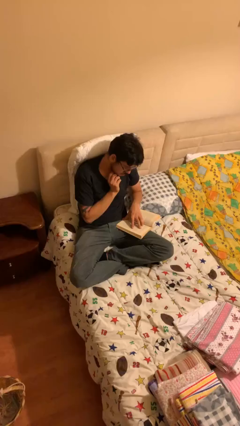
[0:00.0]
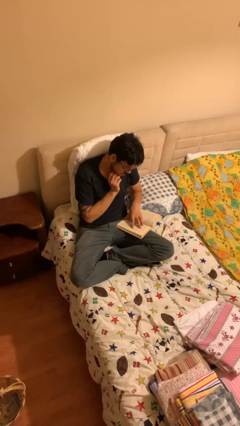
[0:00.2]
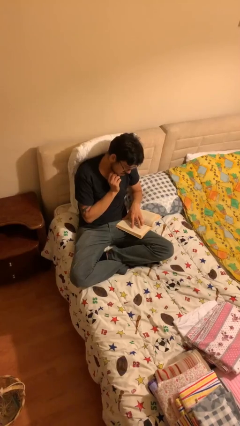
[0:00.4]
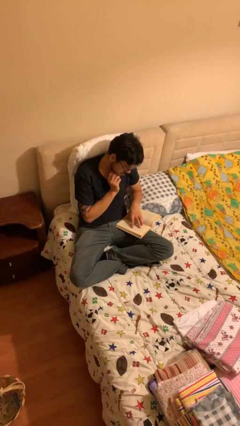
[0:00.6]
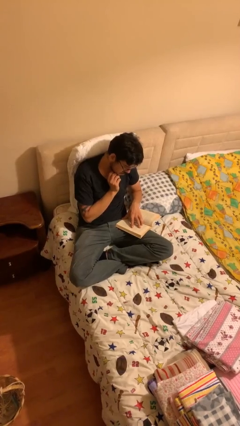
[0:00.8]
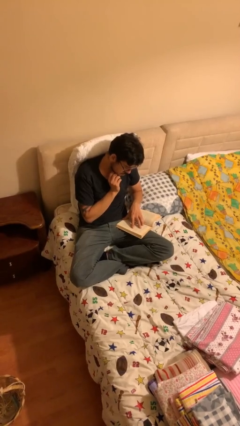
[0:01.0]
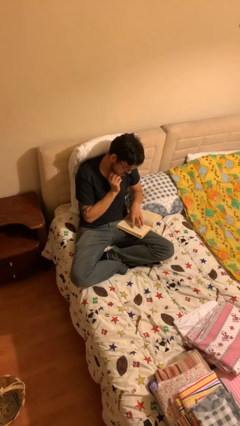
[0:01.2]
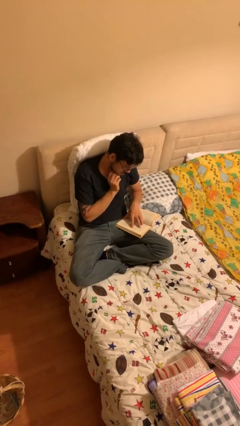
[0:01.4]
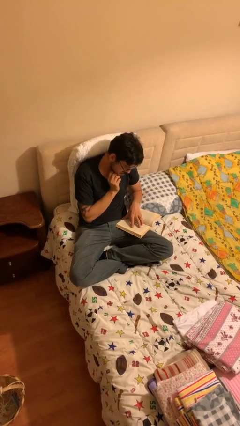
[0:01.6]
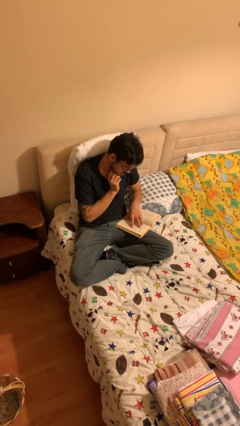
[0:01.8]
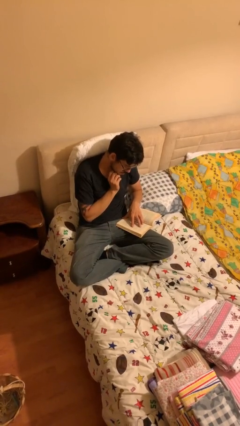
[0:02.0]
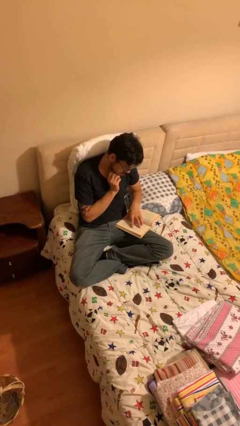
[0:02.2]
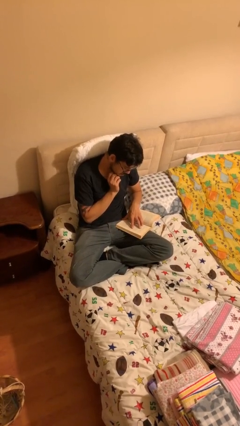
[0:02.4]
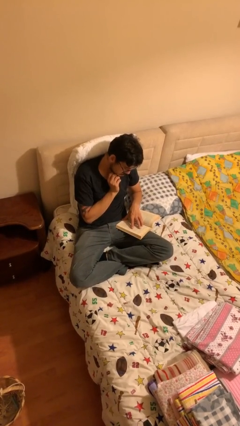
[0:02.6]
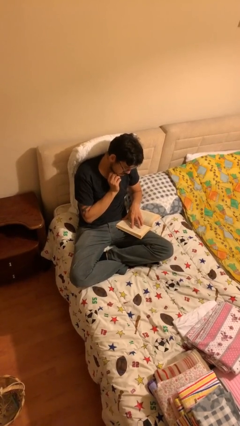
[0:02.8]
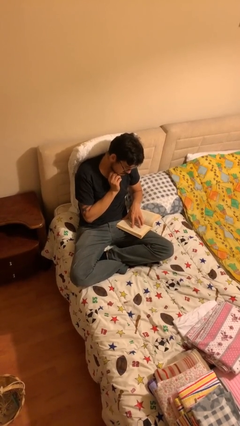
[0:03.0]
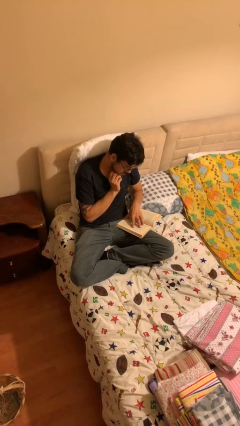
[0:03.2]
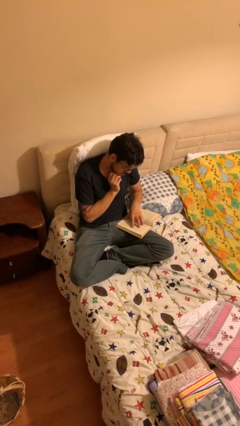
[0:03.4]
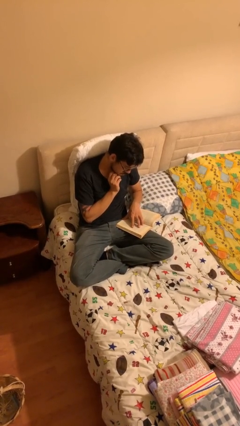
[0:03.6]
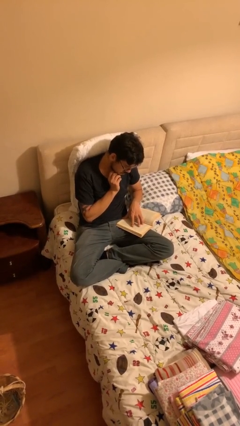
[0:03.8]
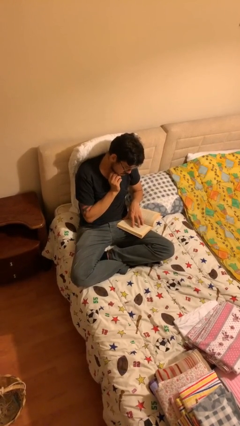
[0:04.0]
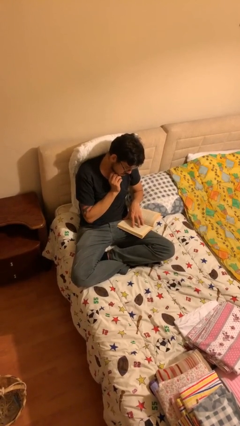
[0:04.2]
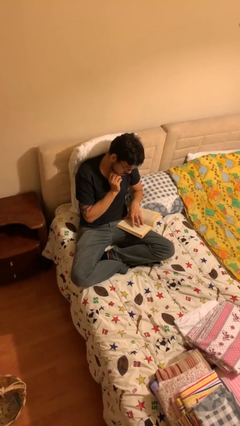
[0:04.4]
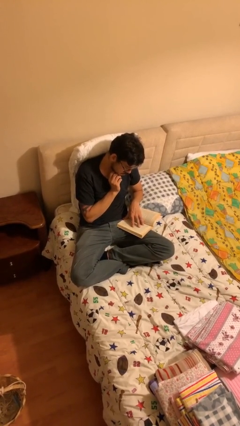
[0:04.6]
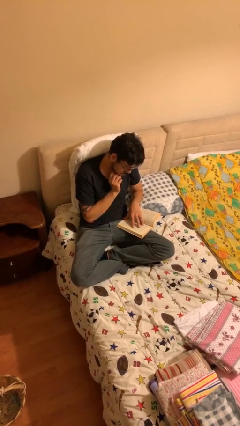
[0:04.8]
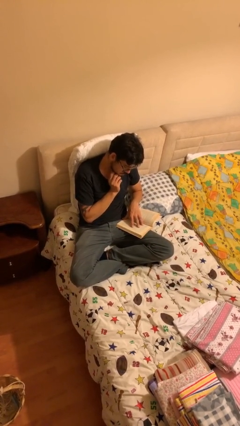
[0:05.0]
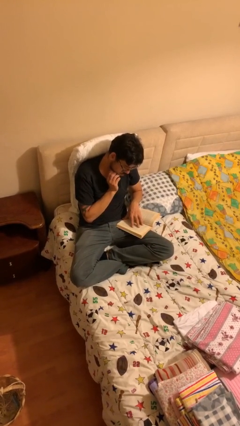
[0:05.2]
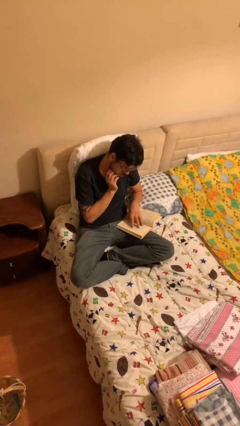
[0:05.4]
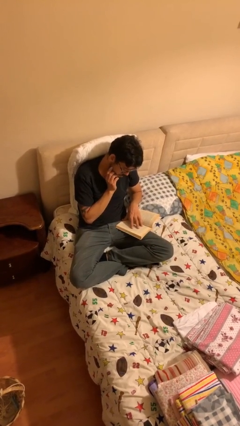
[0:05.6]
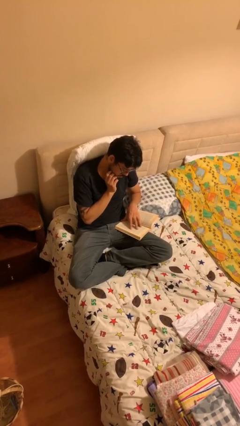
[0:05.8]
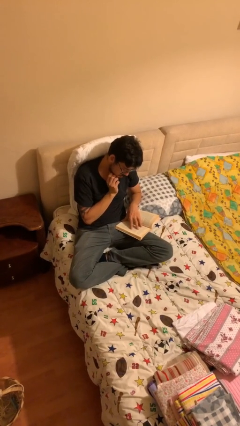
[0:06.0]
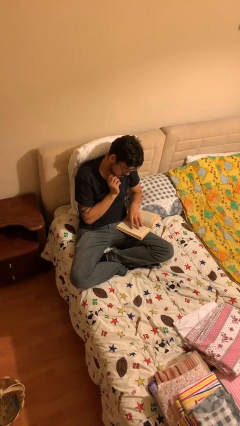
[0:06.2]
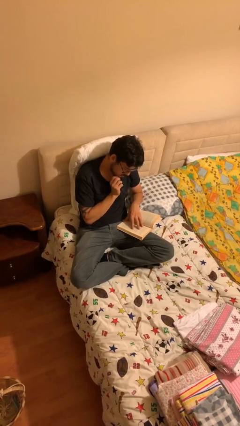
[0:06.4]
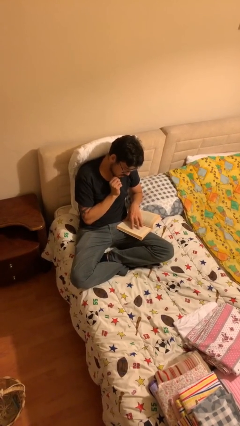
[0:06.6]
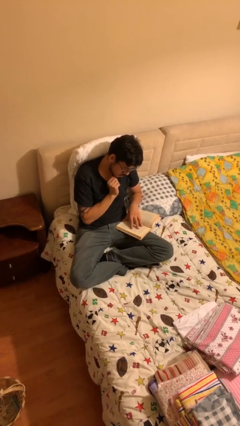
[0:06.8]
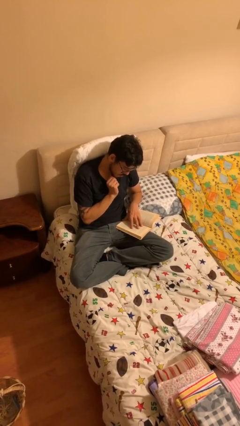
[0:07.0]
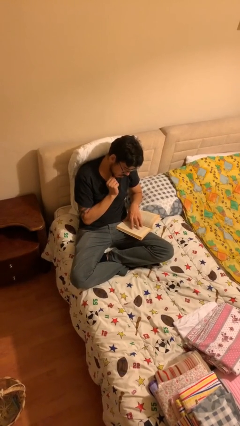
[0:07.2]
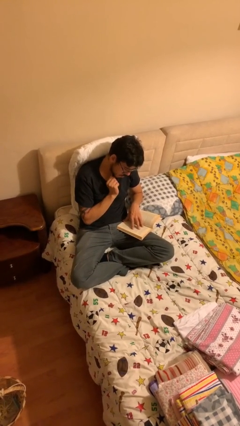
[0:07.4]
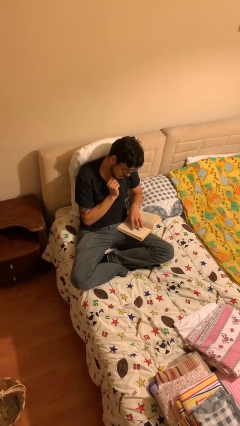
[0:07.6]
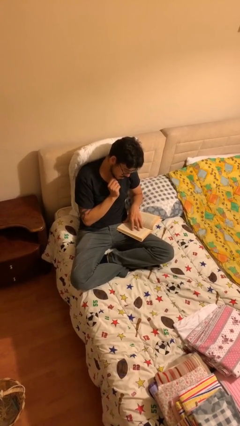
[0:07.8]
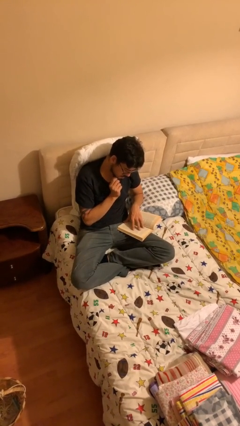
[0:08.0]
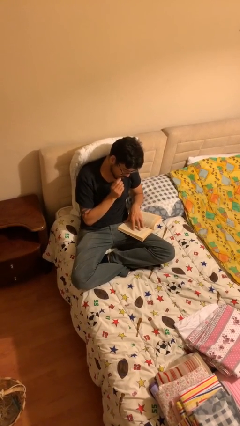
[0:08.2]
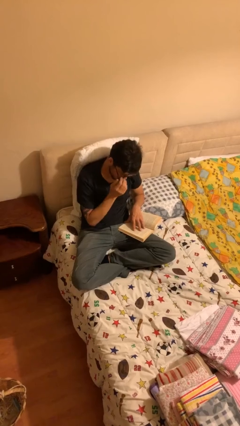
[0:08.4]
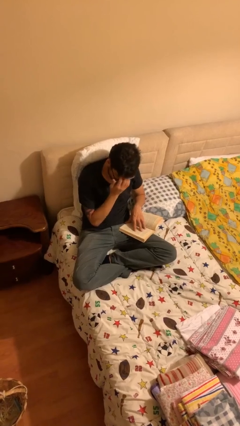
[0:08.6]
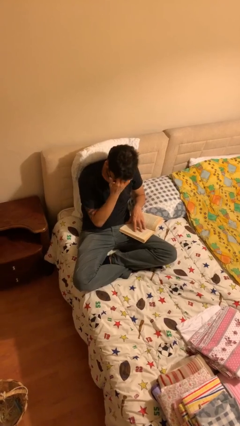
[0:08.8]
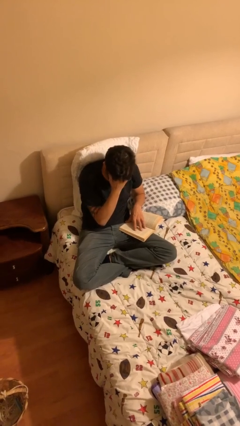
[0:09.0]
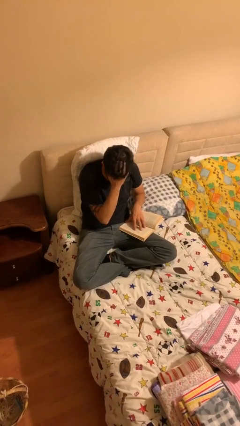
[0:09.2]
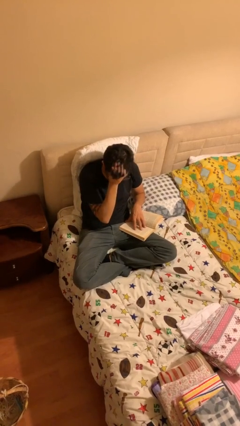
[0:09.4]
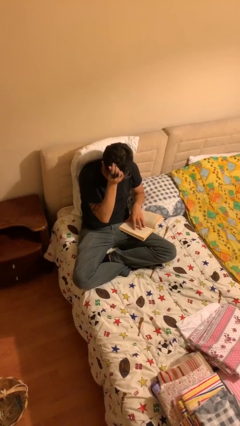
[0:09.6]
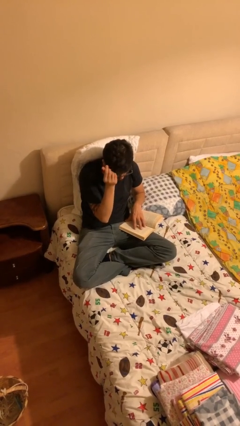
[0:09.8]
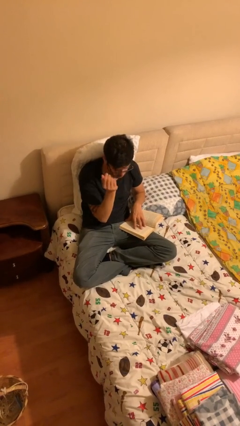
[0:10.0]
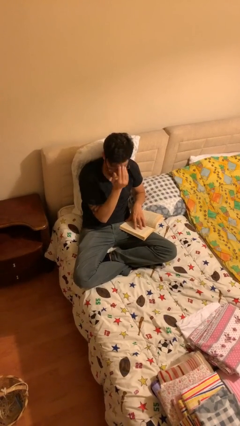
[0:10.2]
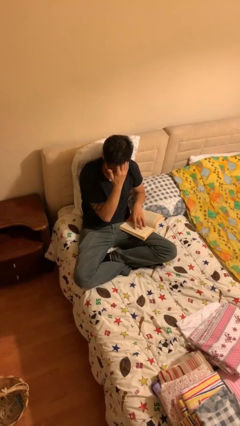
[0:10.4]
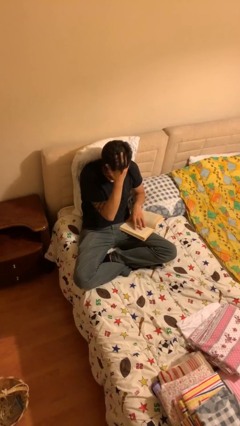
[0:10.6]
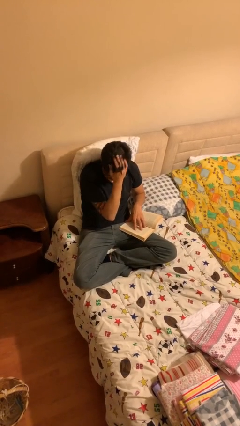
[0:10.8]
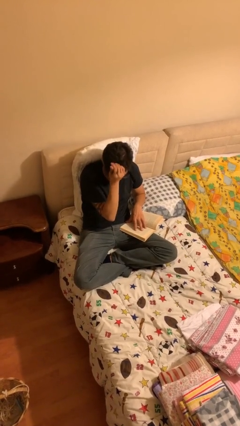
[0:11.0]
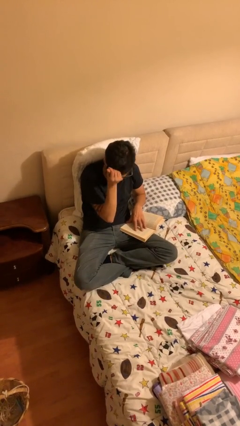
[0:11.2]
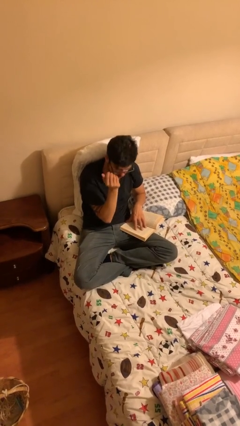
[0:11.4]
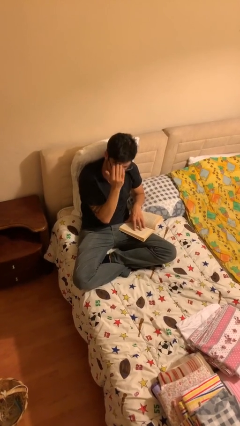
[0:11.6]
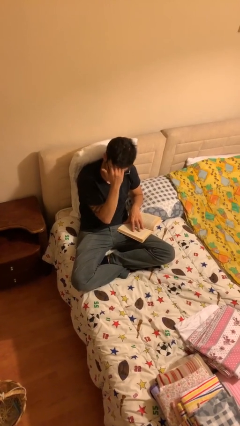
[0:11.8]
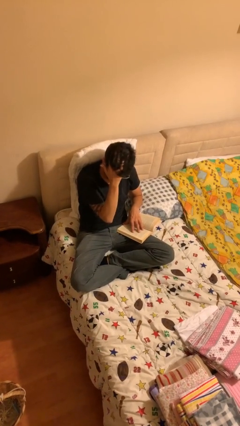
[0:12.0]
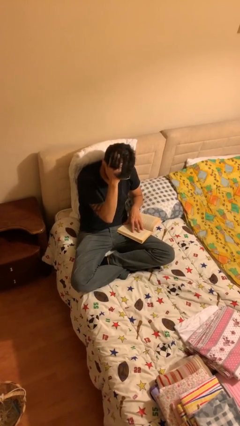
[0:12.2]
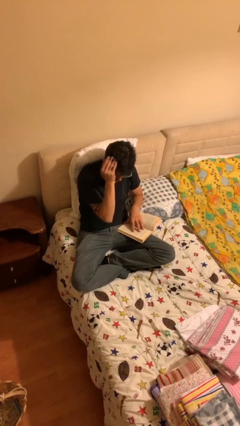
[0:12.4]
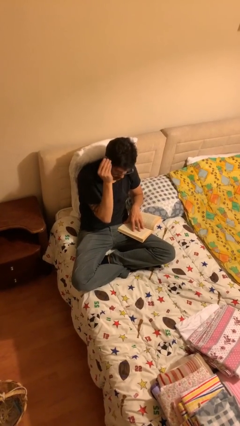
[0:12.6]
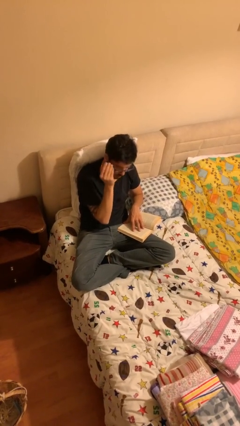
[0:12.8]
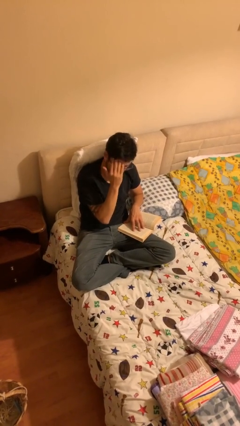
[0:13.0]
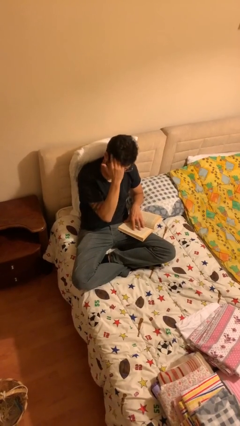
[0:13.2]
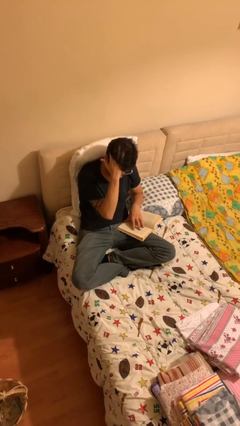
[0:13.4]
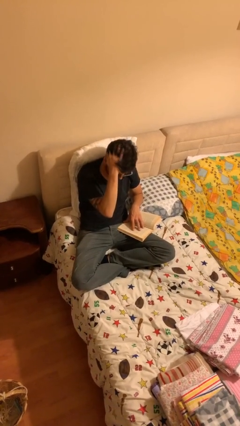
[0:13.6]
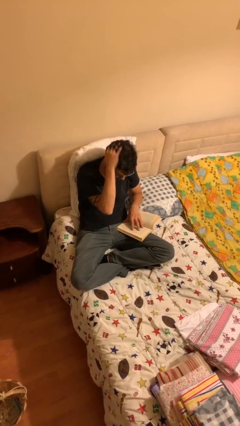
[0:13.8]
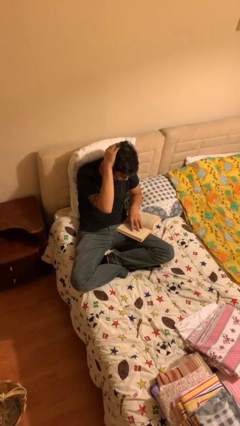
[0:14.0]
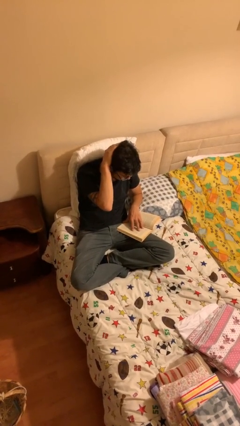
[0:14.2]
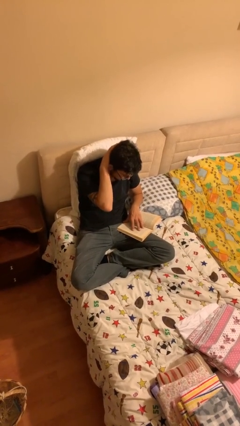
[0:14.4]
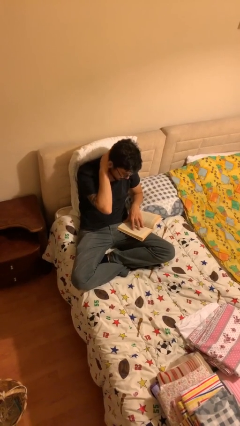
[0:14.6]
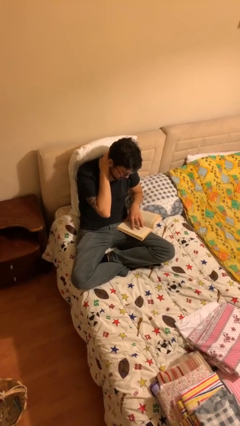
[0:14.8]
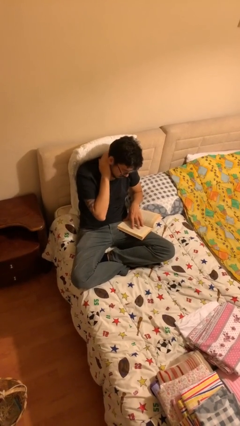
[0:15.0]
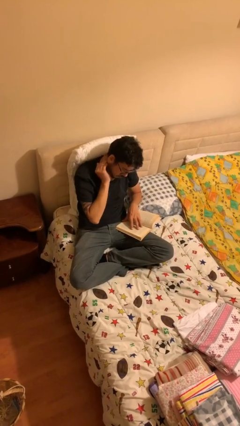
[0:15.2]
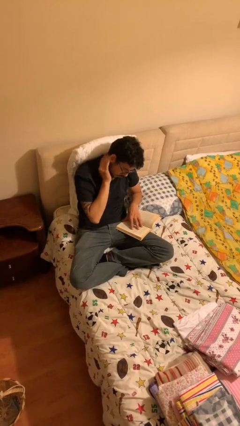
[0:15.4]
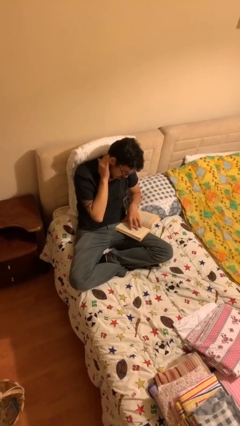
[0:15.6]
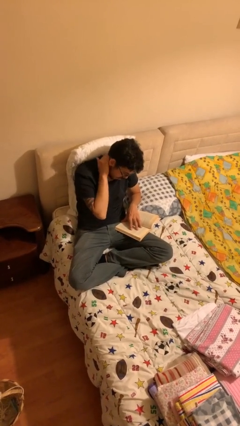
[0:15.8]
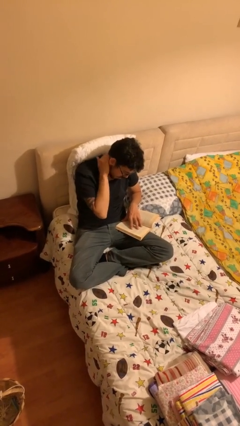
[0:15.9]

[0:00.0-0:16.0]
person reads document

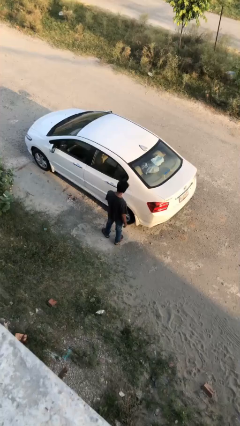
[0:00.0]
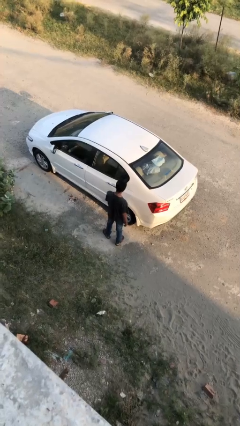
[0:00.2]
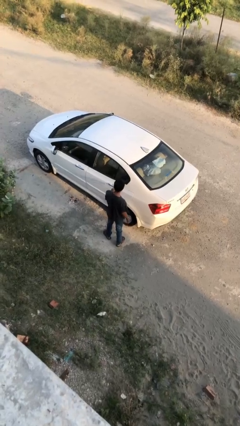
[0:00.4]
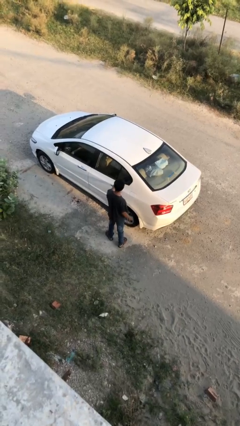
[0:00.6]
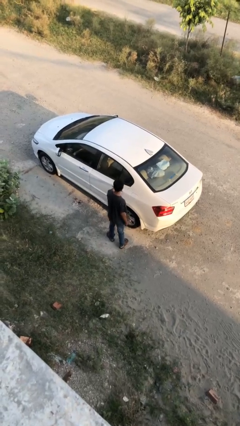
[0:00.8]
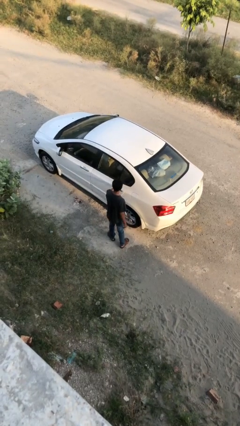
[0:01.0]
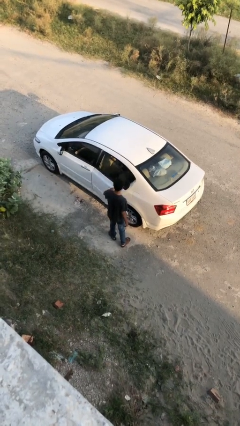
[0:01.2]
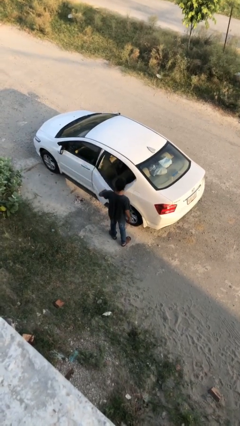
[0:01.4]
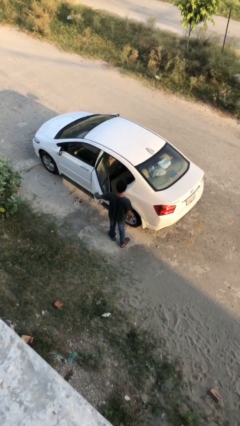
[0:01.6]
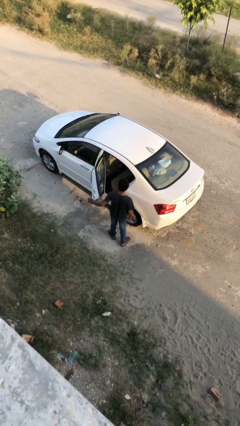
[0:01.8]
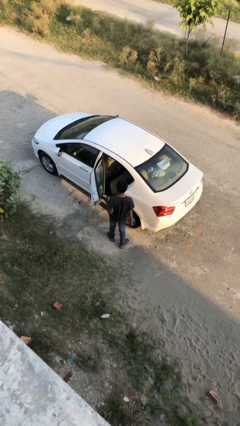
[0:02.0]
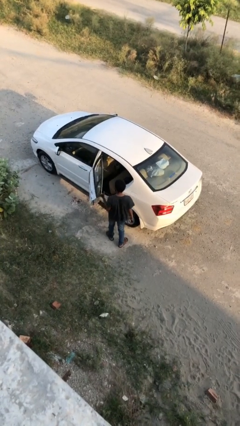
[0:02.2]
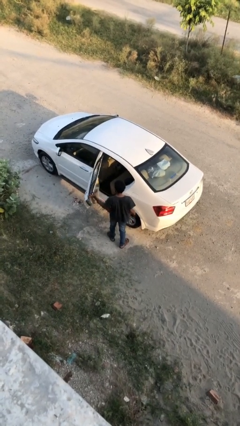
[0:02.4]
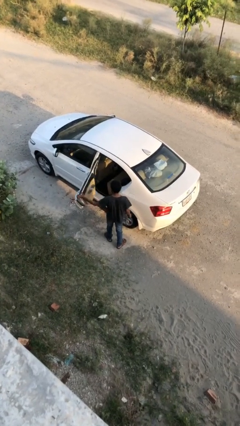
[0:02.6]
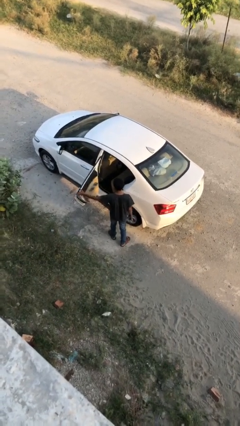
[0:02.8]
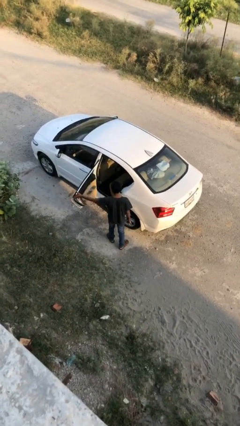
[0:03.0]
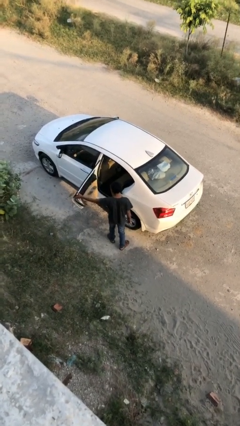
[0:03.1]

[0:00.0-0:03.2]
person opens car door
